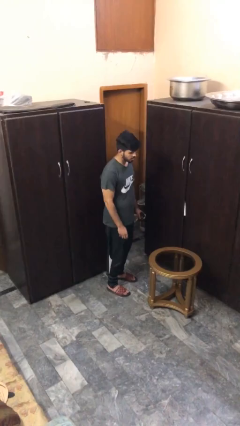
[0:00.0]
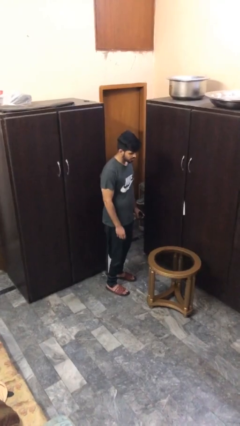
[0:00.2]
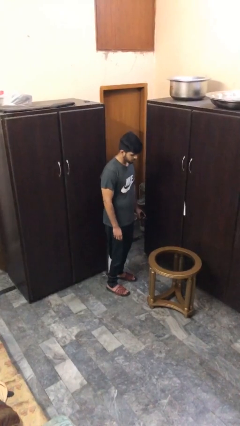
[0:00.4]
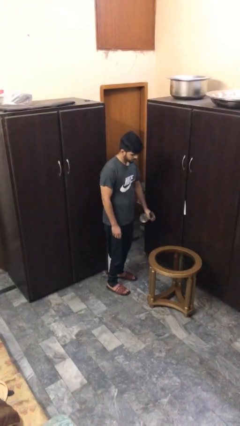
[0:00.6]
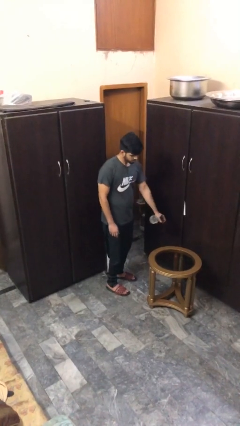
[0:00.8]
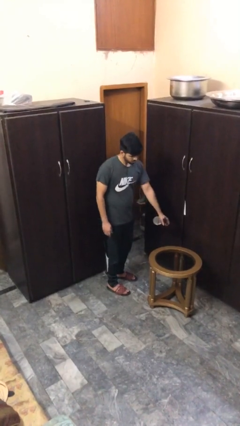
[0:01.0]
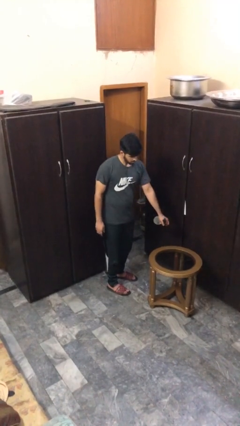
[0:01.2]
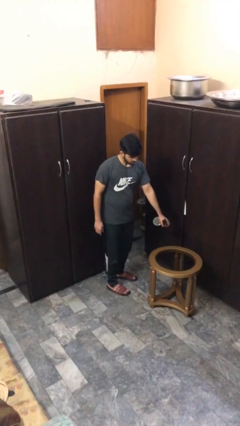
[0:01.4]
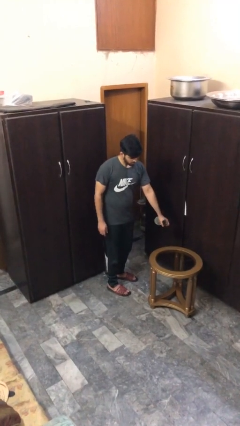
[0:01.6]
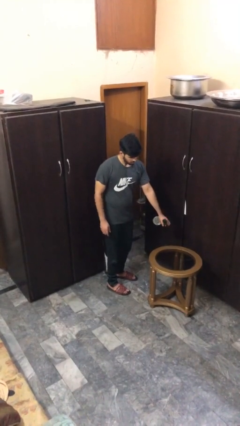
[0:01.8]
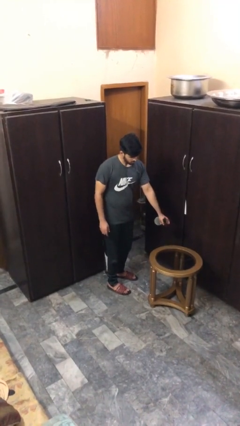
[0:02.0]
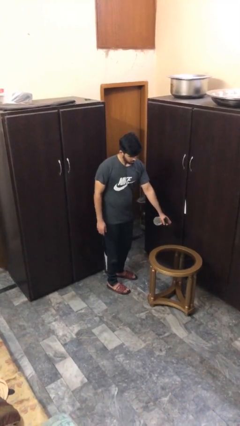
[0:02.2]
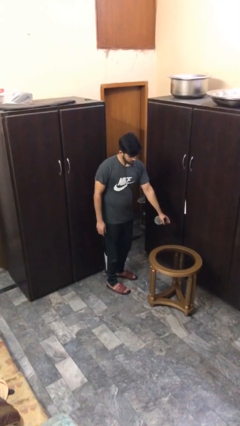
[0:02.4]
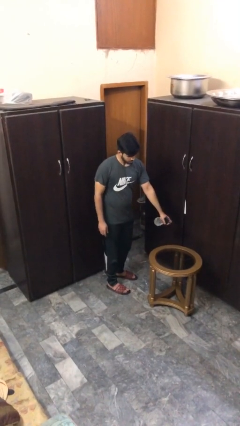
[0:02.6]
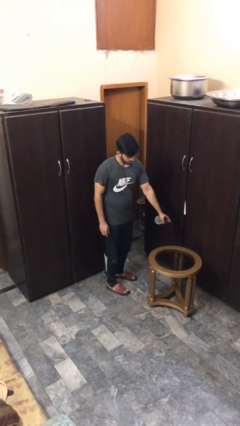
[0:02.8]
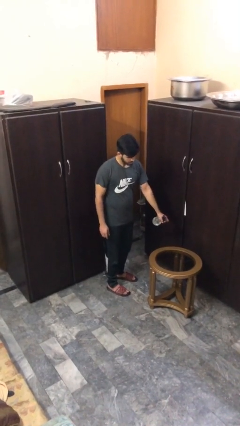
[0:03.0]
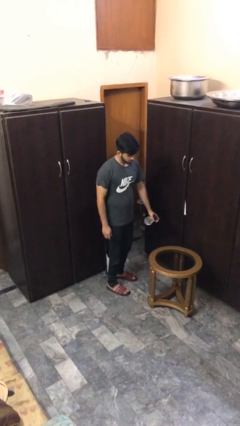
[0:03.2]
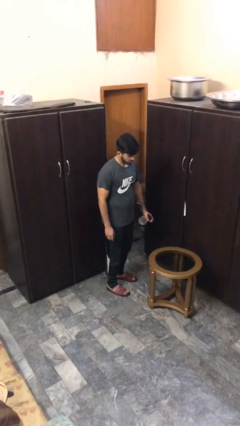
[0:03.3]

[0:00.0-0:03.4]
person sprays from bottle

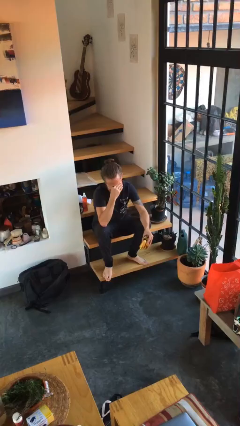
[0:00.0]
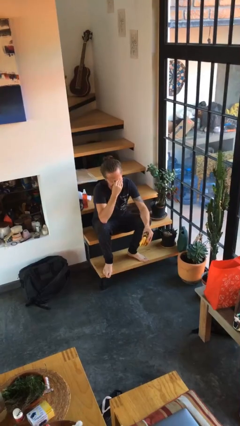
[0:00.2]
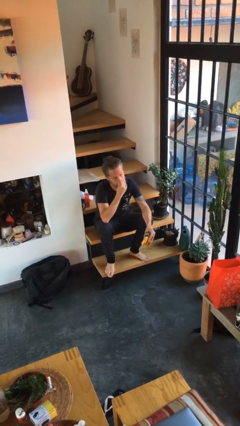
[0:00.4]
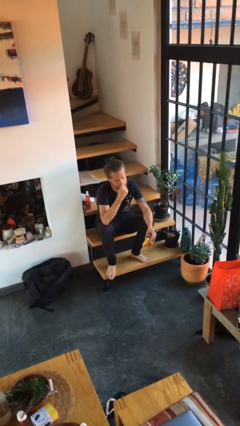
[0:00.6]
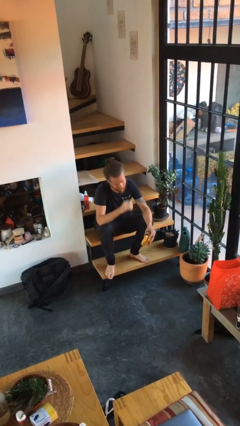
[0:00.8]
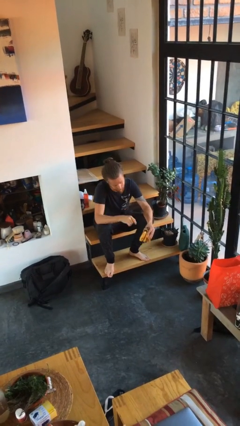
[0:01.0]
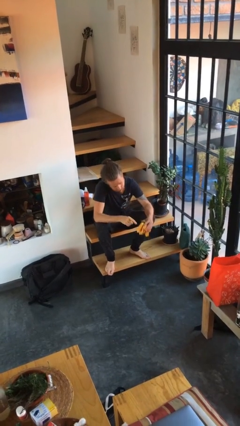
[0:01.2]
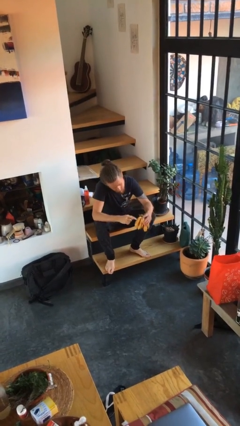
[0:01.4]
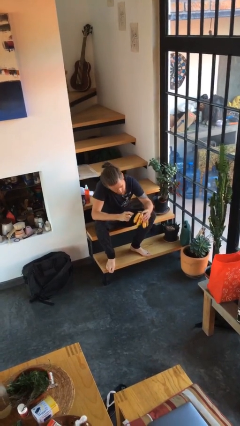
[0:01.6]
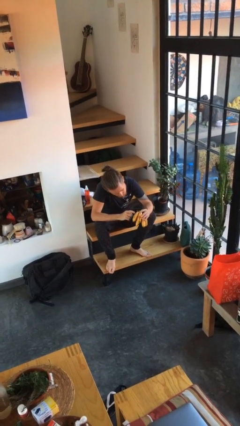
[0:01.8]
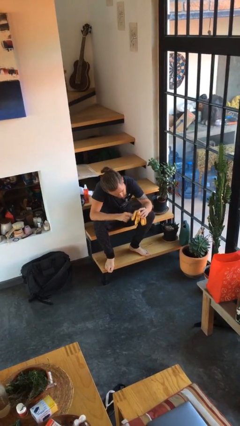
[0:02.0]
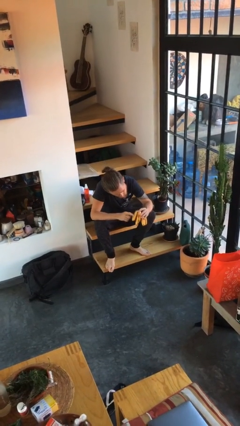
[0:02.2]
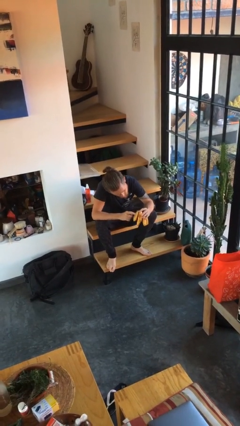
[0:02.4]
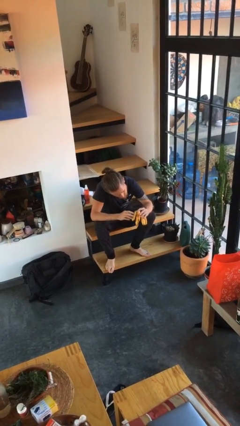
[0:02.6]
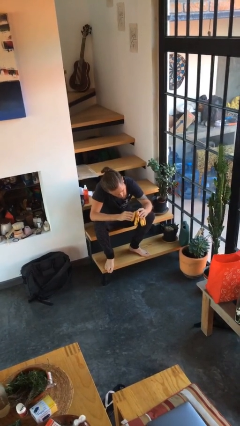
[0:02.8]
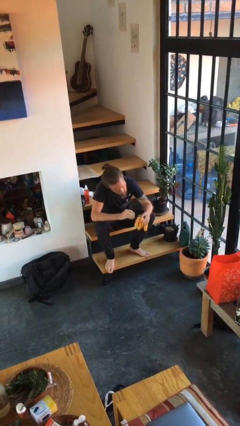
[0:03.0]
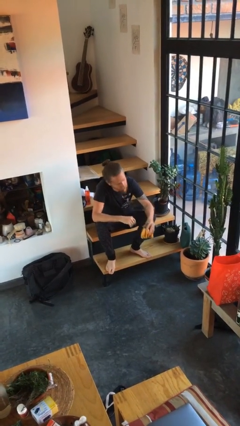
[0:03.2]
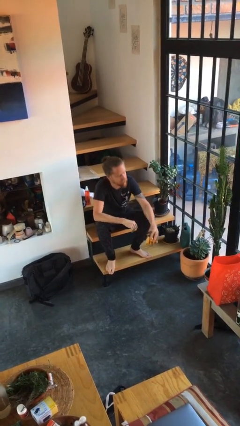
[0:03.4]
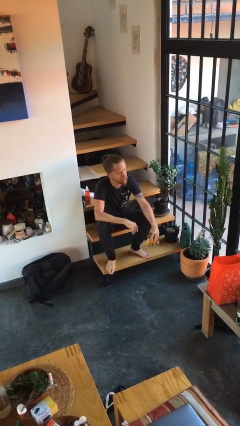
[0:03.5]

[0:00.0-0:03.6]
person taps object with finger

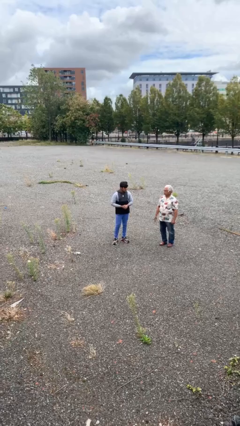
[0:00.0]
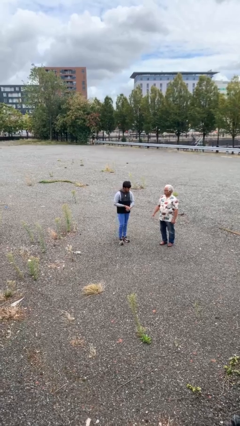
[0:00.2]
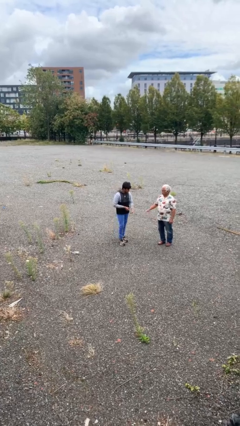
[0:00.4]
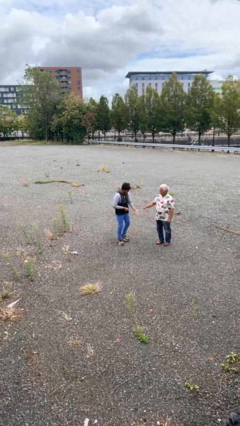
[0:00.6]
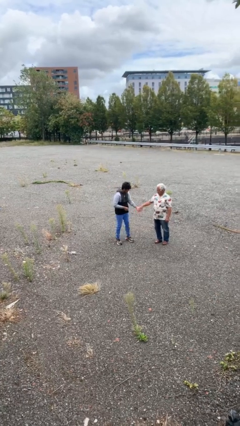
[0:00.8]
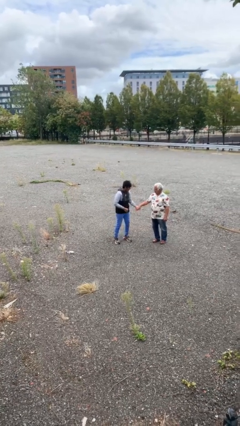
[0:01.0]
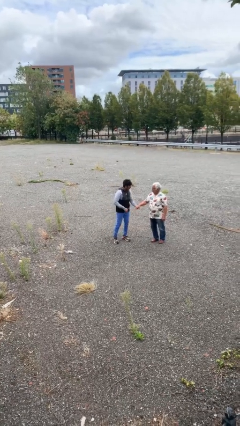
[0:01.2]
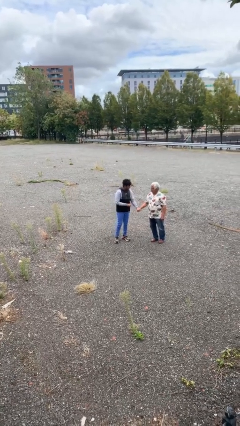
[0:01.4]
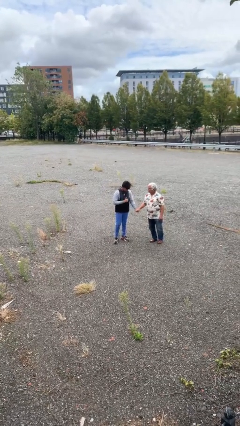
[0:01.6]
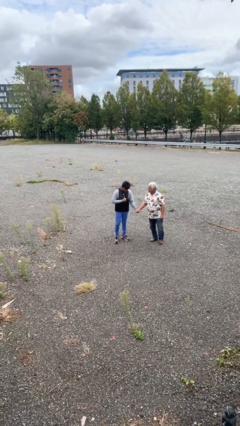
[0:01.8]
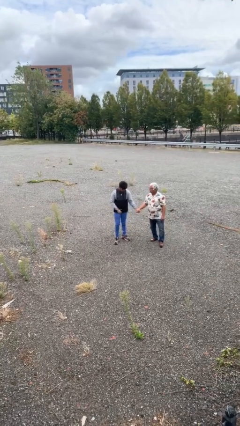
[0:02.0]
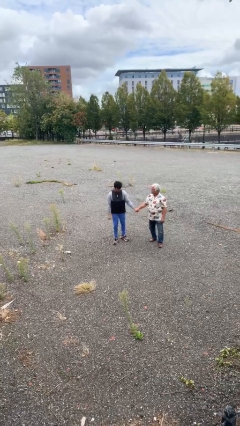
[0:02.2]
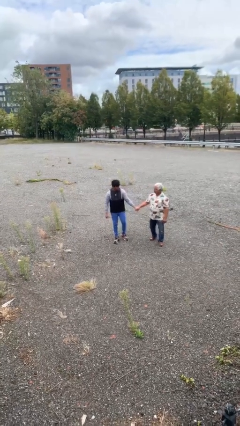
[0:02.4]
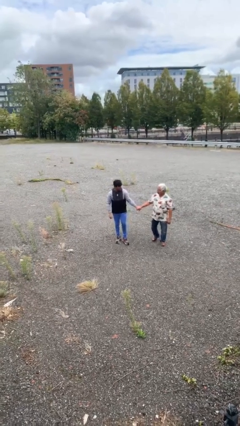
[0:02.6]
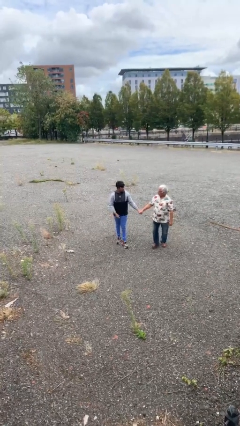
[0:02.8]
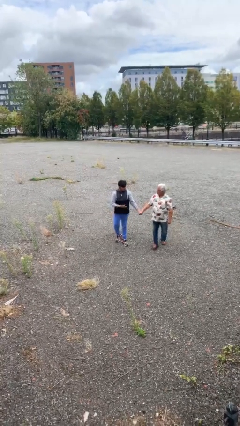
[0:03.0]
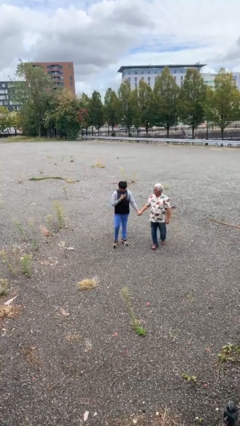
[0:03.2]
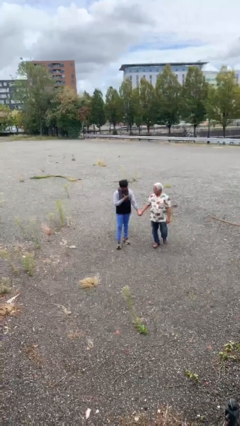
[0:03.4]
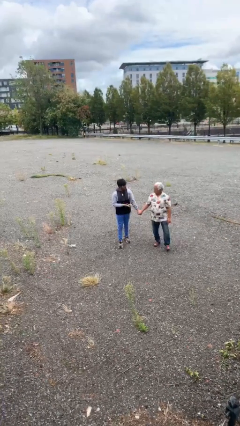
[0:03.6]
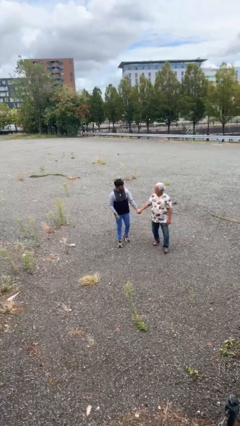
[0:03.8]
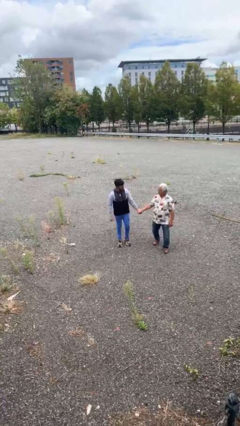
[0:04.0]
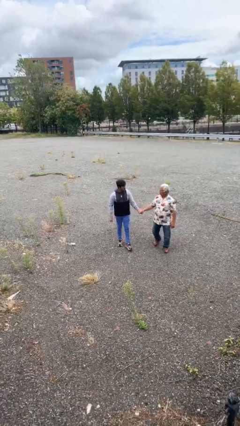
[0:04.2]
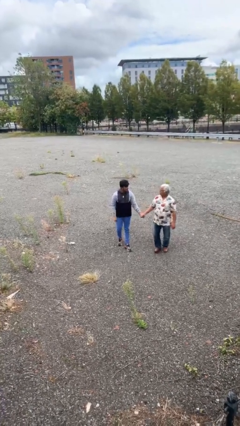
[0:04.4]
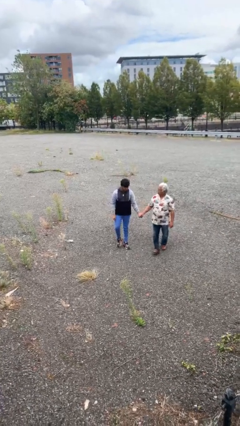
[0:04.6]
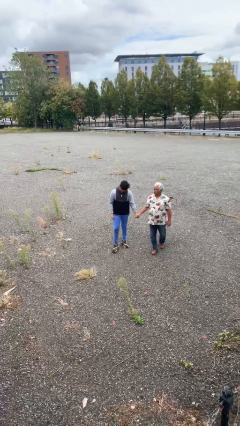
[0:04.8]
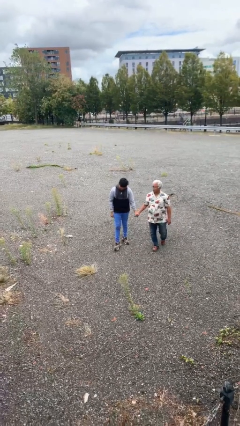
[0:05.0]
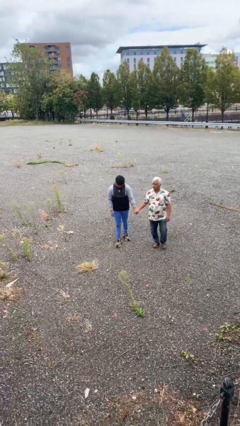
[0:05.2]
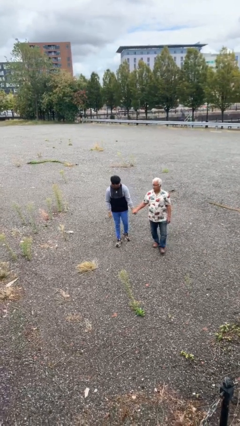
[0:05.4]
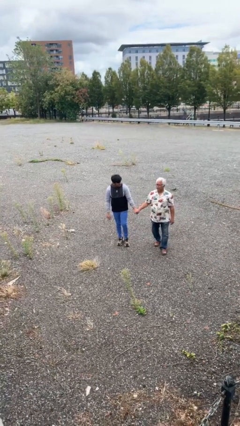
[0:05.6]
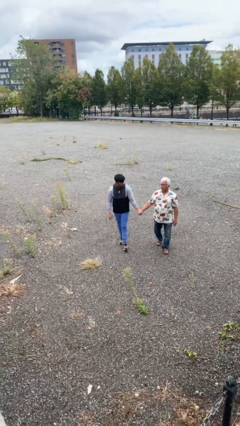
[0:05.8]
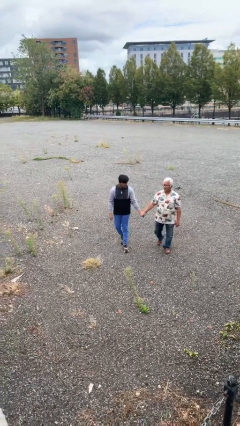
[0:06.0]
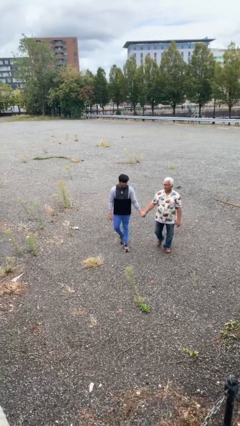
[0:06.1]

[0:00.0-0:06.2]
person holds hand

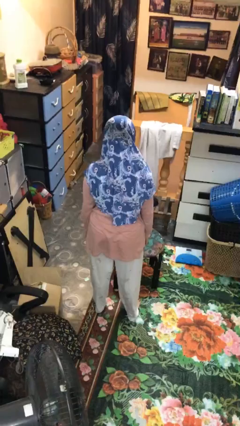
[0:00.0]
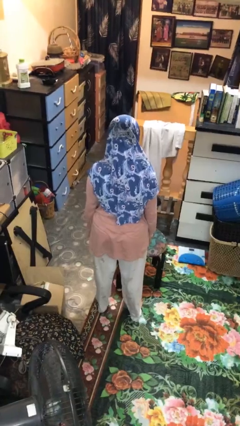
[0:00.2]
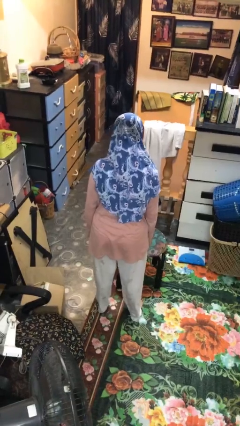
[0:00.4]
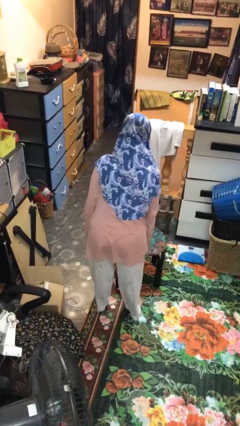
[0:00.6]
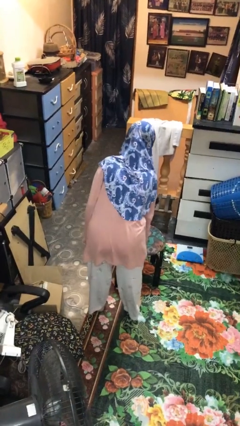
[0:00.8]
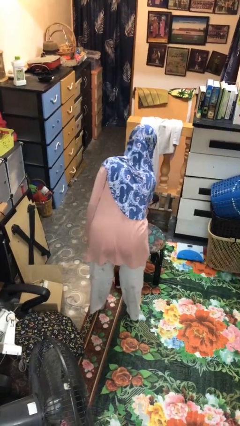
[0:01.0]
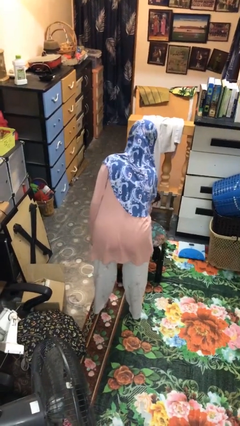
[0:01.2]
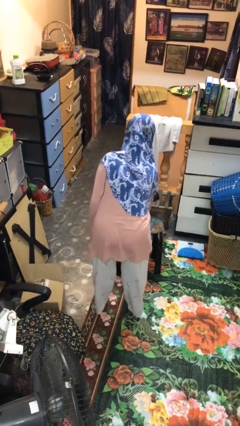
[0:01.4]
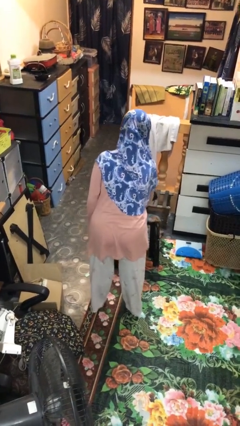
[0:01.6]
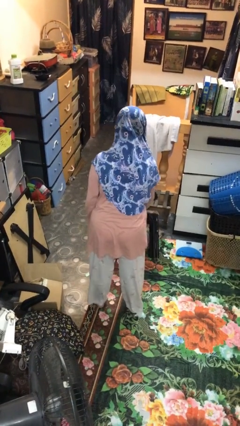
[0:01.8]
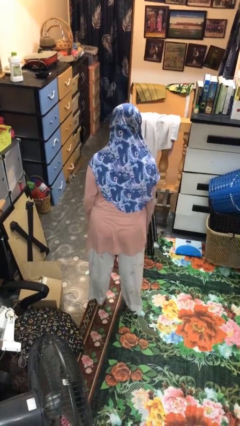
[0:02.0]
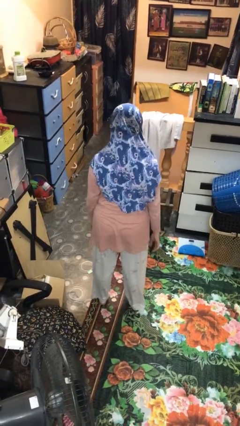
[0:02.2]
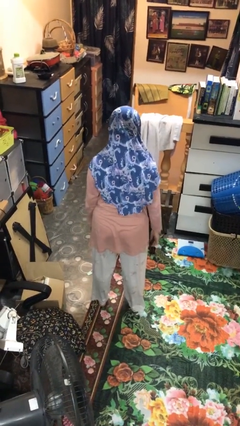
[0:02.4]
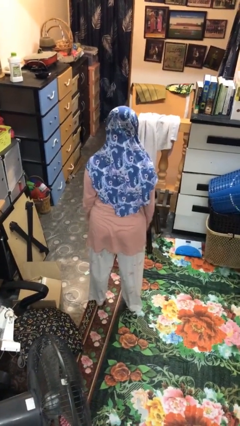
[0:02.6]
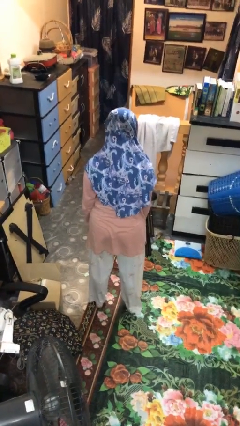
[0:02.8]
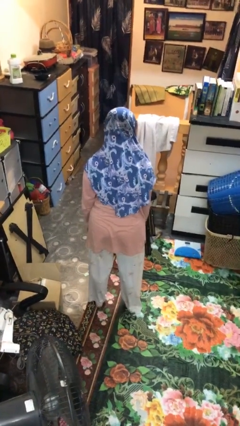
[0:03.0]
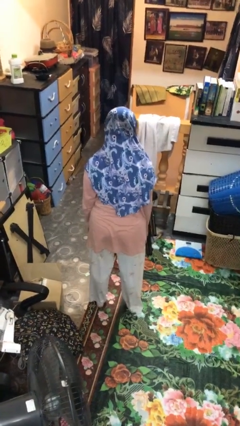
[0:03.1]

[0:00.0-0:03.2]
person knocks over furniture

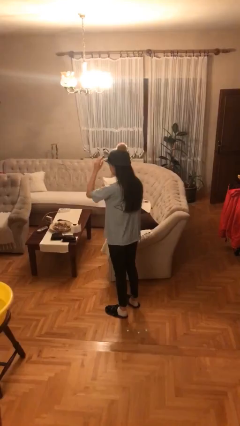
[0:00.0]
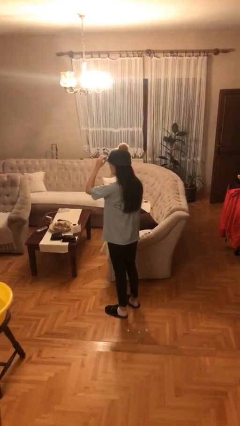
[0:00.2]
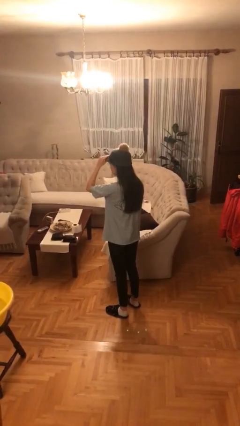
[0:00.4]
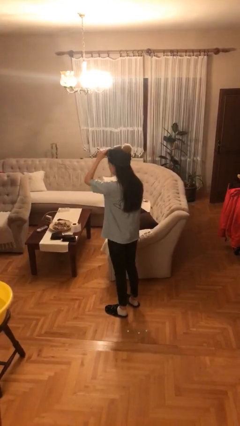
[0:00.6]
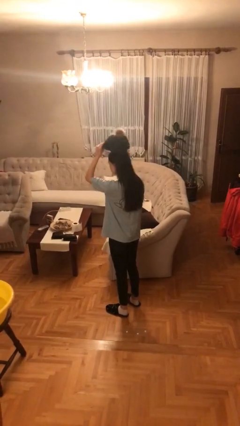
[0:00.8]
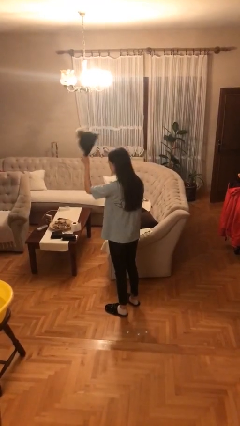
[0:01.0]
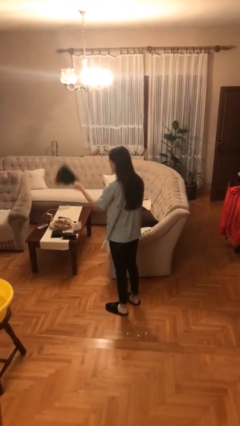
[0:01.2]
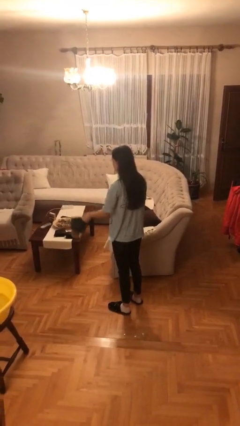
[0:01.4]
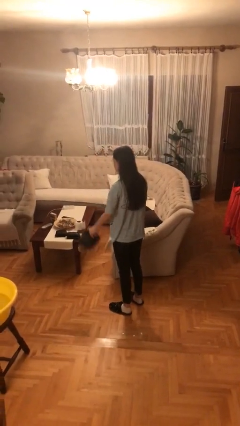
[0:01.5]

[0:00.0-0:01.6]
person takes off hat

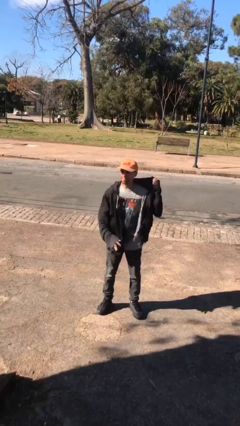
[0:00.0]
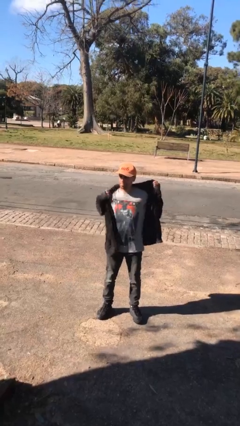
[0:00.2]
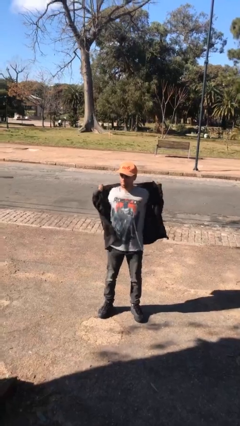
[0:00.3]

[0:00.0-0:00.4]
person takes off jacket
